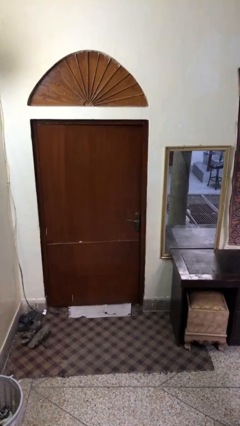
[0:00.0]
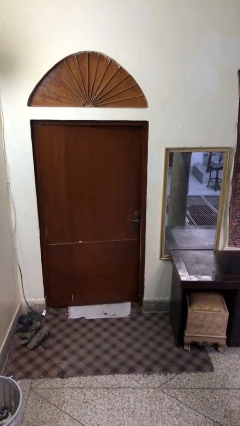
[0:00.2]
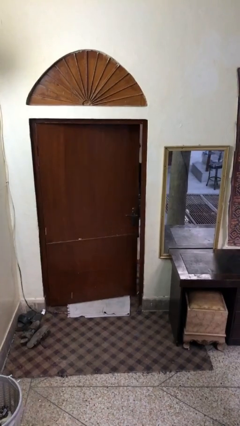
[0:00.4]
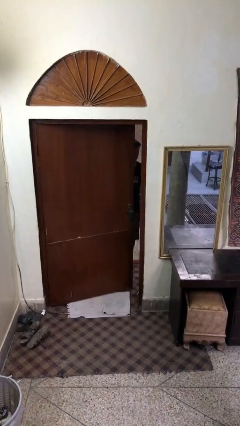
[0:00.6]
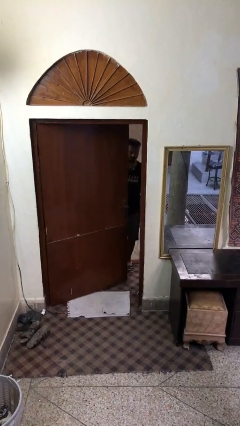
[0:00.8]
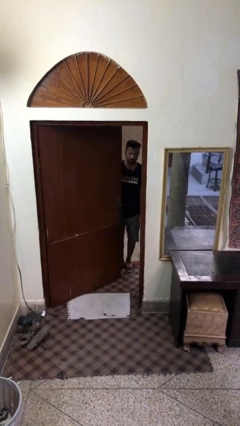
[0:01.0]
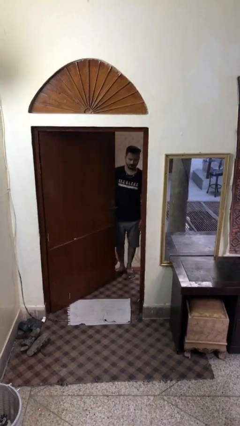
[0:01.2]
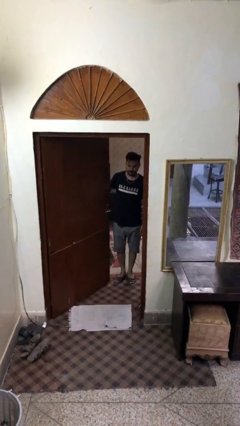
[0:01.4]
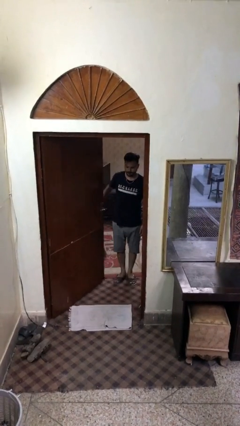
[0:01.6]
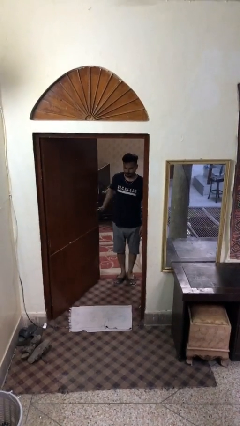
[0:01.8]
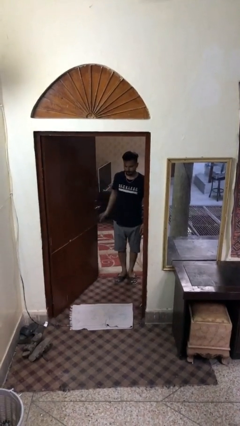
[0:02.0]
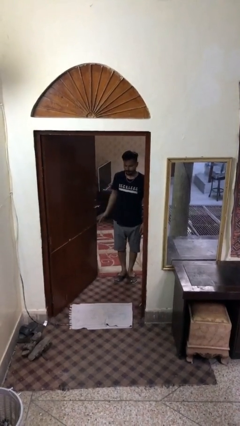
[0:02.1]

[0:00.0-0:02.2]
person opens facility door

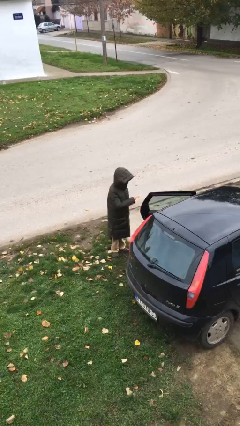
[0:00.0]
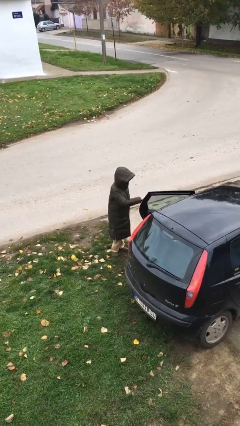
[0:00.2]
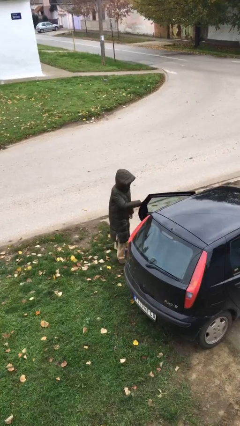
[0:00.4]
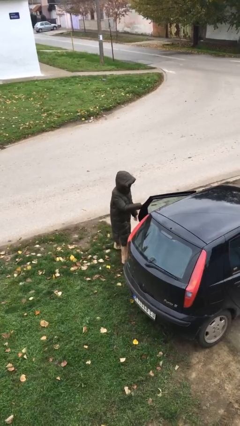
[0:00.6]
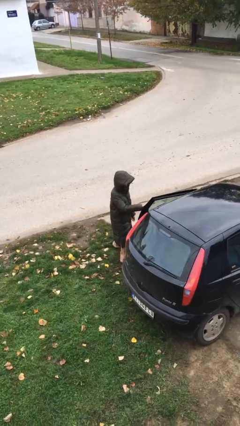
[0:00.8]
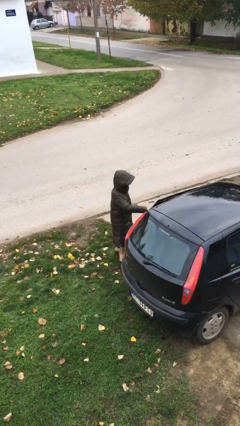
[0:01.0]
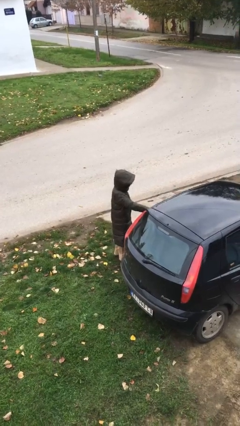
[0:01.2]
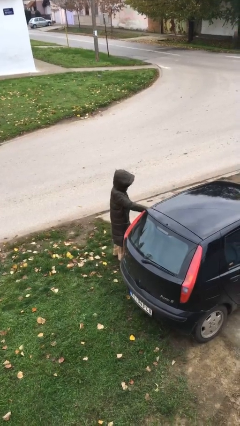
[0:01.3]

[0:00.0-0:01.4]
person closes car door

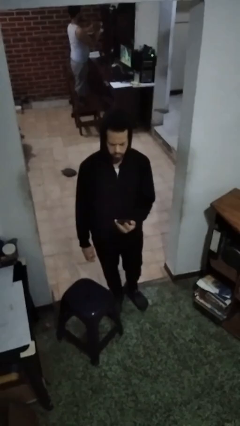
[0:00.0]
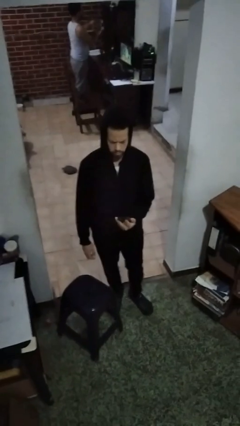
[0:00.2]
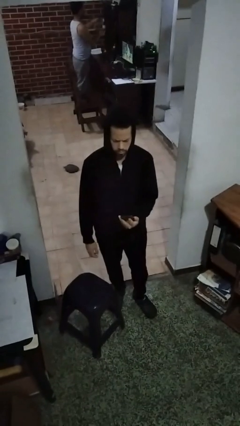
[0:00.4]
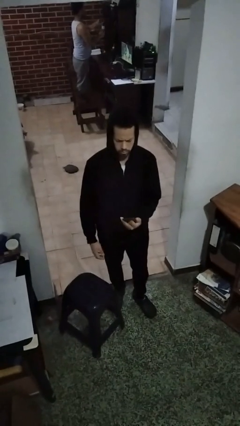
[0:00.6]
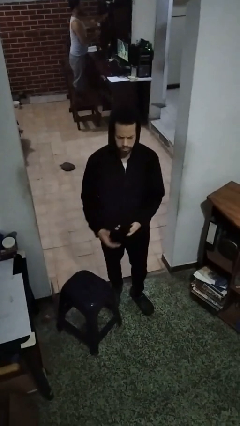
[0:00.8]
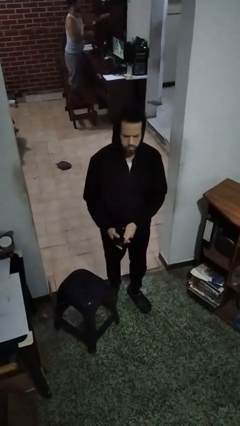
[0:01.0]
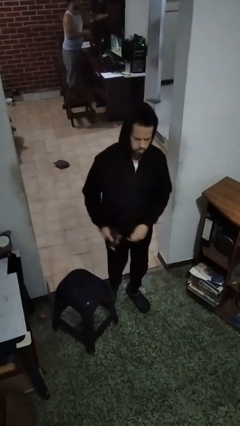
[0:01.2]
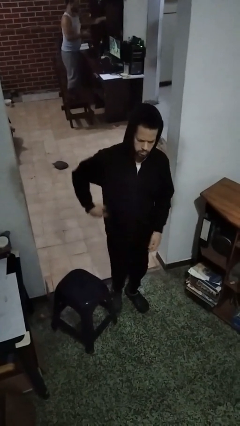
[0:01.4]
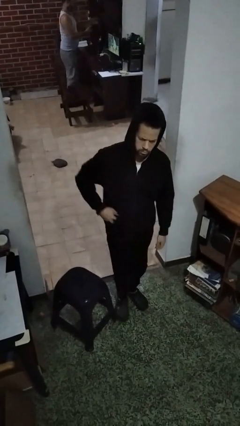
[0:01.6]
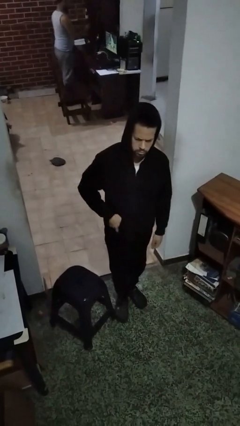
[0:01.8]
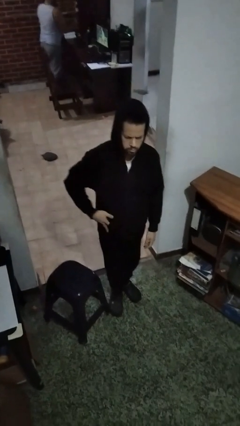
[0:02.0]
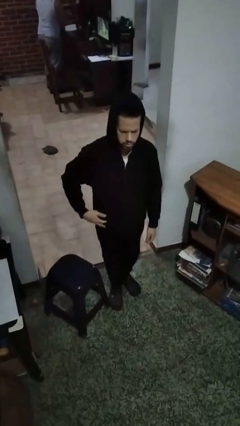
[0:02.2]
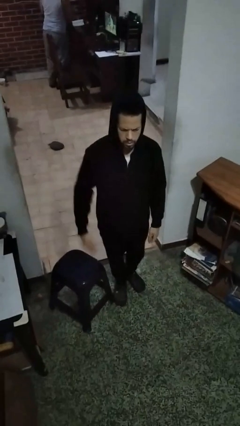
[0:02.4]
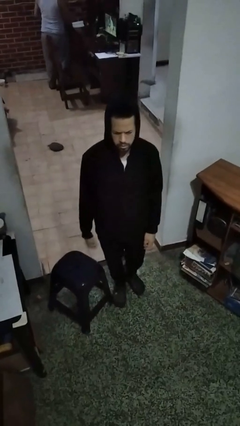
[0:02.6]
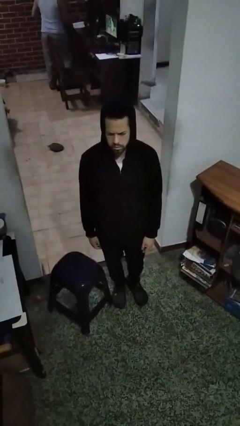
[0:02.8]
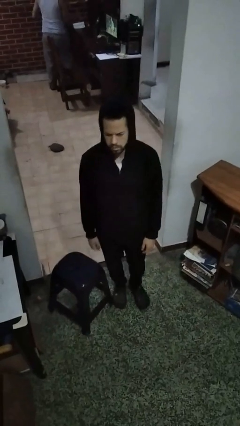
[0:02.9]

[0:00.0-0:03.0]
person puts phone into pocket

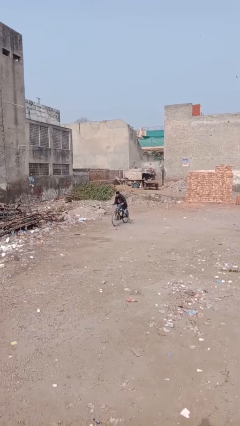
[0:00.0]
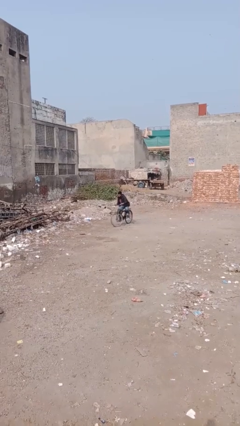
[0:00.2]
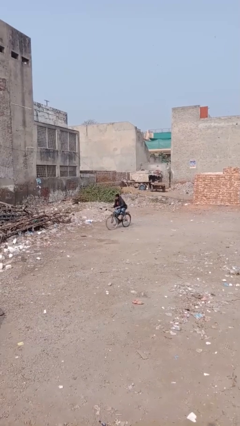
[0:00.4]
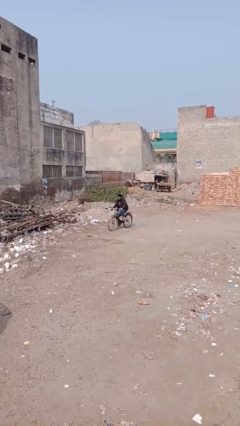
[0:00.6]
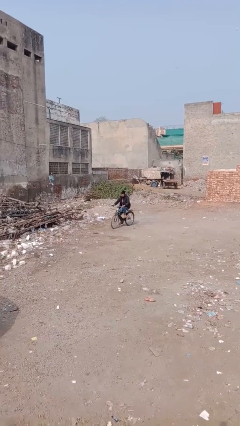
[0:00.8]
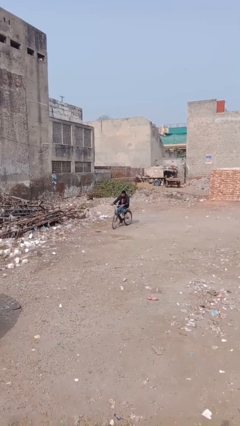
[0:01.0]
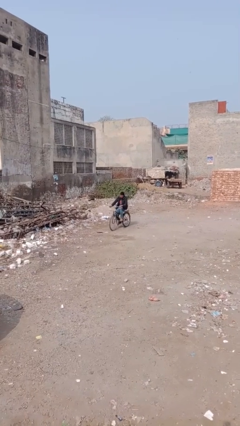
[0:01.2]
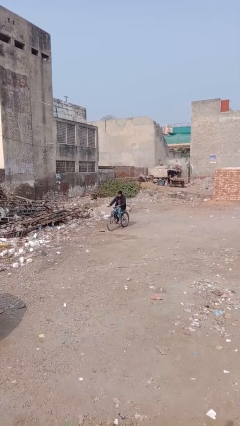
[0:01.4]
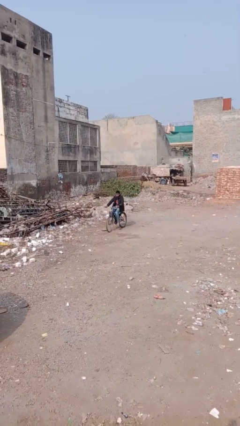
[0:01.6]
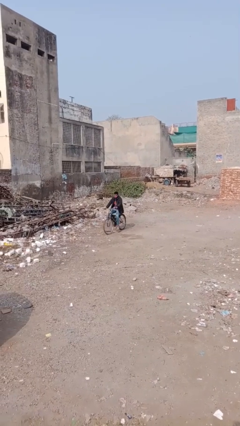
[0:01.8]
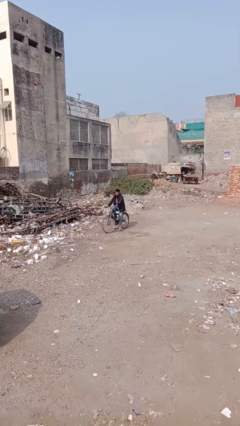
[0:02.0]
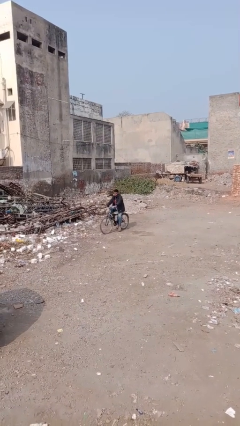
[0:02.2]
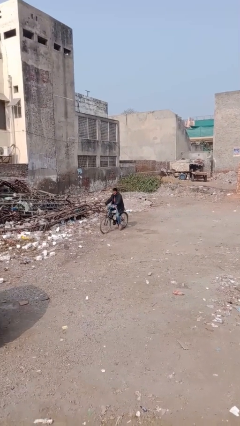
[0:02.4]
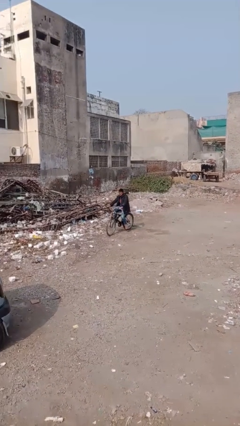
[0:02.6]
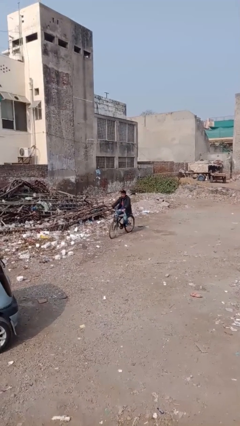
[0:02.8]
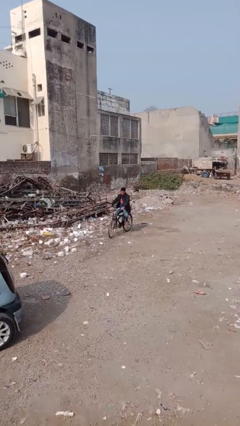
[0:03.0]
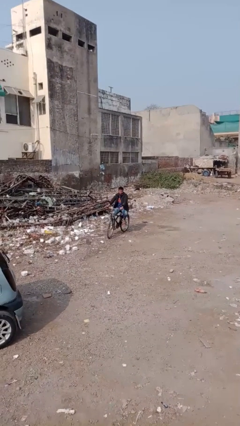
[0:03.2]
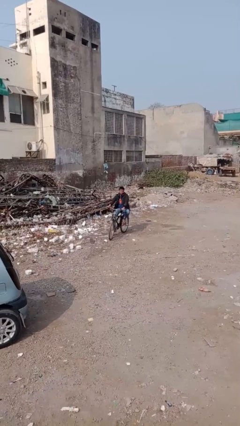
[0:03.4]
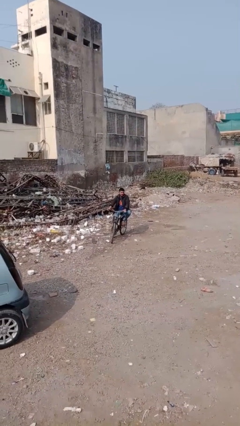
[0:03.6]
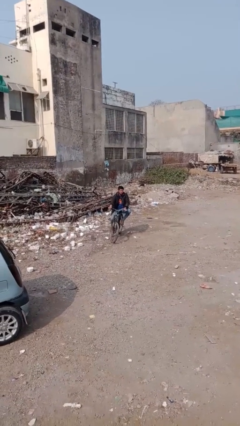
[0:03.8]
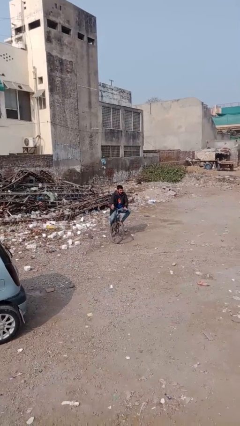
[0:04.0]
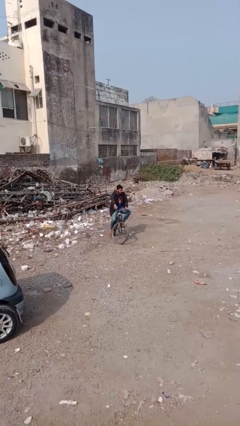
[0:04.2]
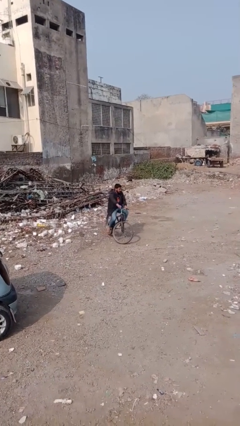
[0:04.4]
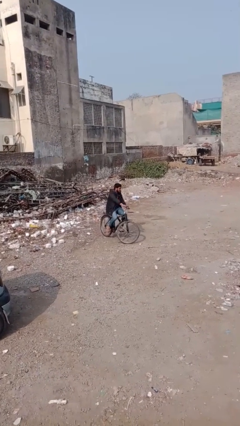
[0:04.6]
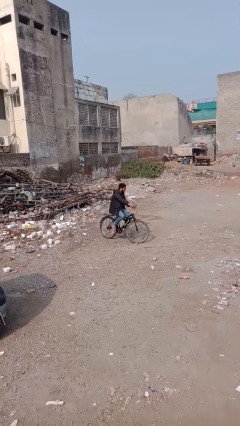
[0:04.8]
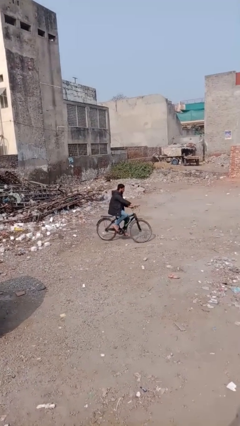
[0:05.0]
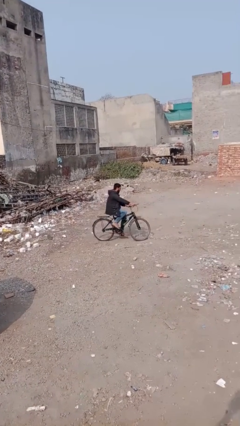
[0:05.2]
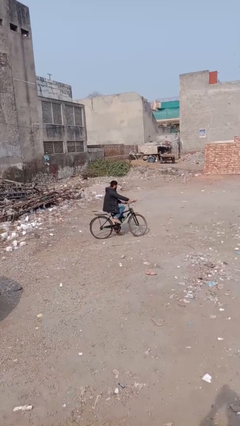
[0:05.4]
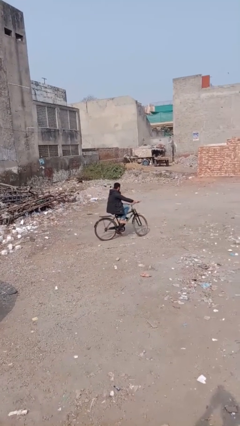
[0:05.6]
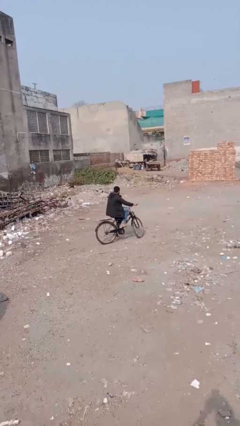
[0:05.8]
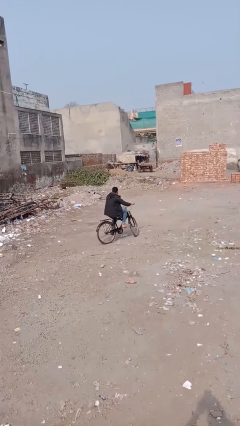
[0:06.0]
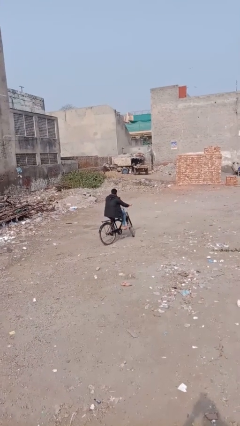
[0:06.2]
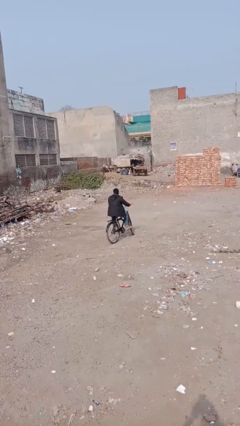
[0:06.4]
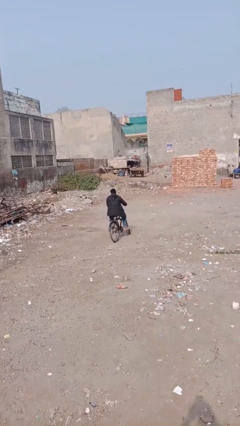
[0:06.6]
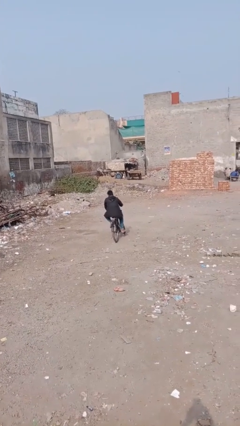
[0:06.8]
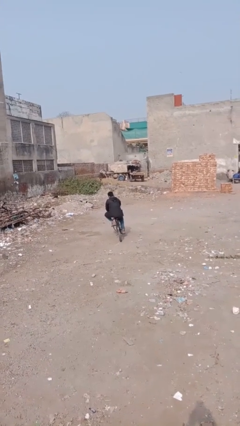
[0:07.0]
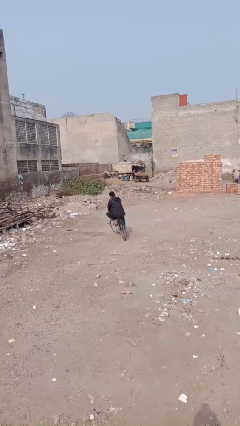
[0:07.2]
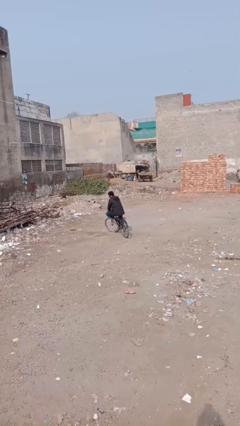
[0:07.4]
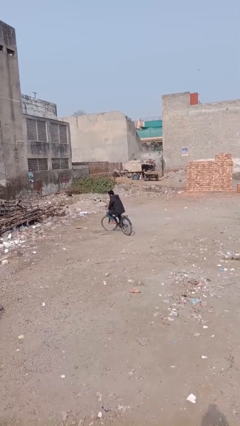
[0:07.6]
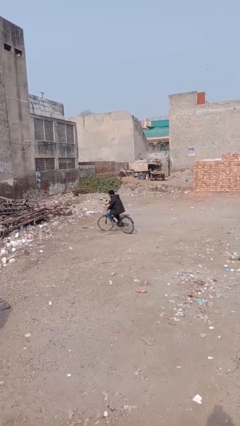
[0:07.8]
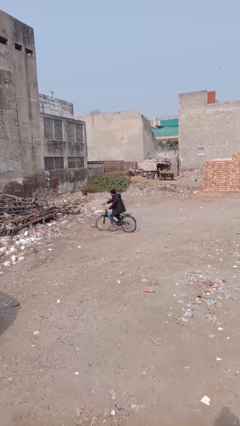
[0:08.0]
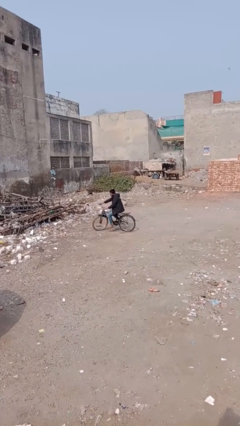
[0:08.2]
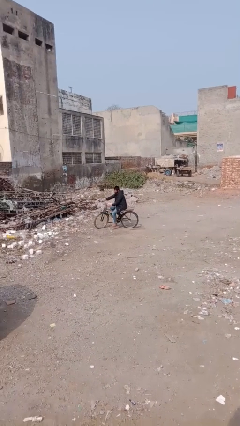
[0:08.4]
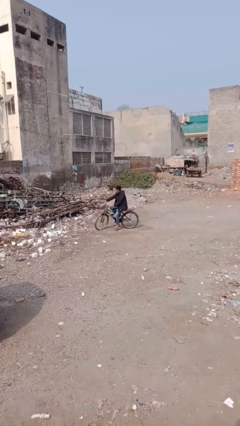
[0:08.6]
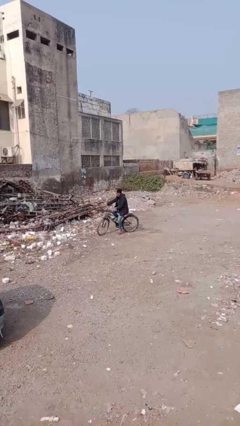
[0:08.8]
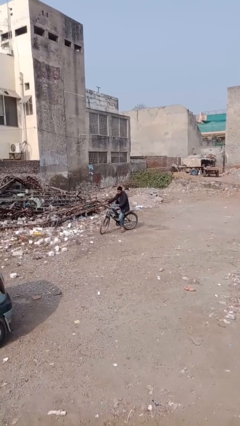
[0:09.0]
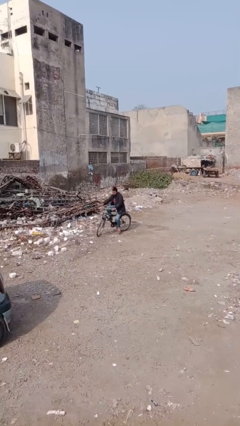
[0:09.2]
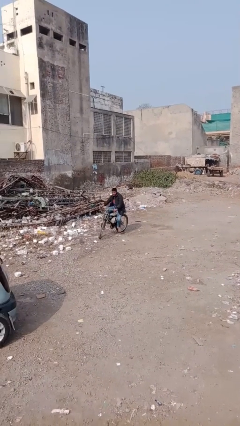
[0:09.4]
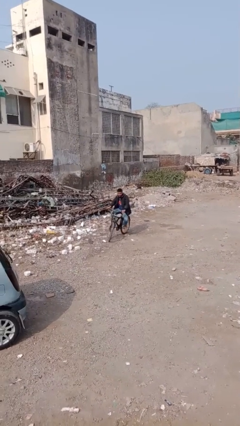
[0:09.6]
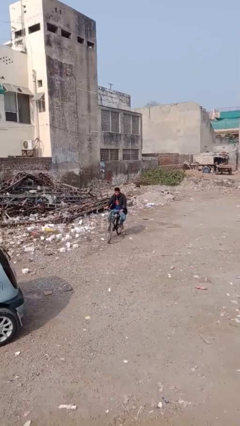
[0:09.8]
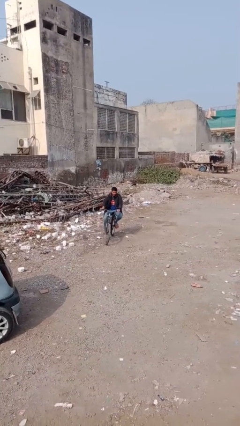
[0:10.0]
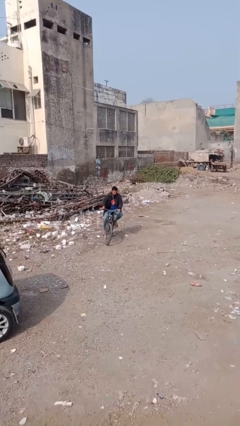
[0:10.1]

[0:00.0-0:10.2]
person rides bicycle

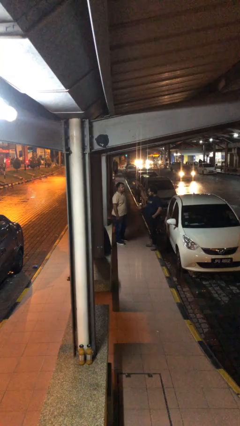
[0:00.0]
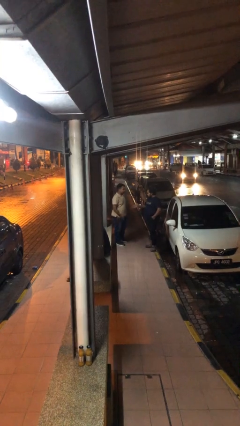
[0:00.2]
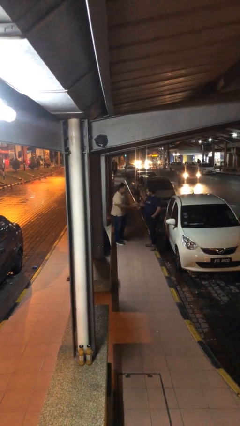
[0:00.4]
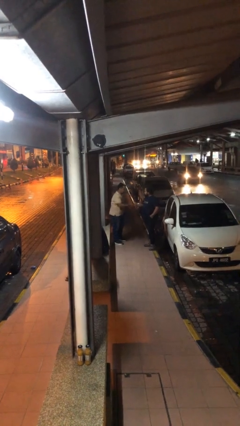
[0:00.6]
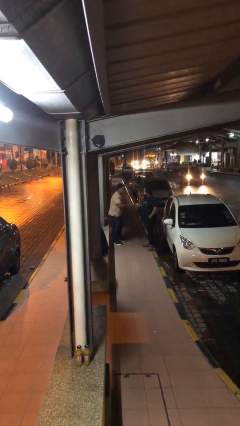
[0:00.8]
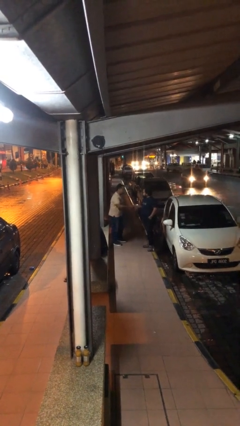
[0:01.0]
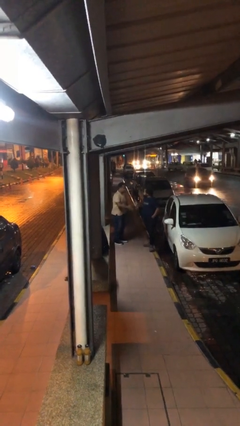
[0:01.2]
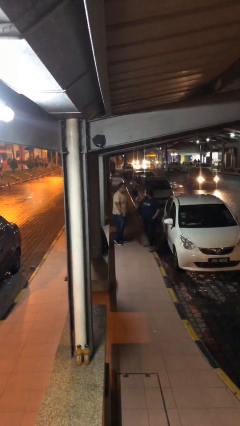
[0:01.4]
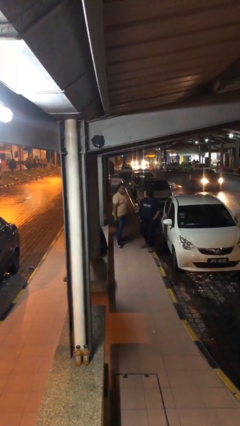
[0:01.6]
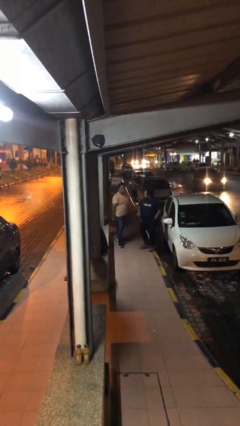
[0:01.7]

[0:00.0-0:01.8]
person shakes hand
